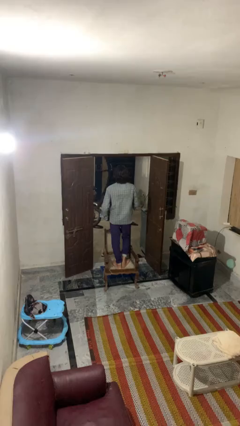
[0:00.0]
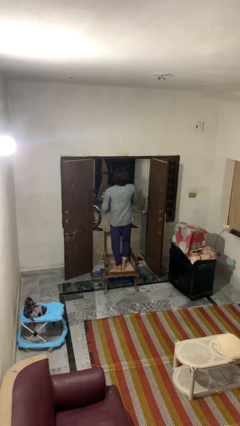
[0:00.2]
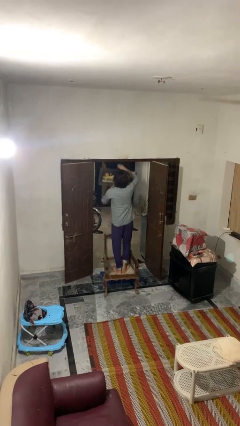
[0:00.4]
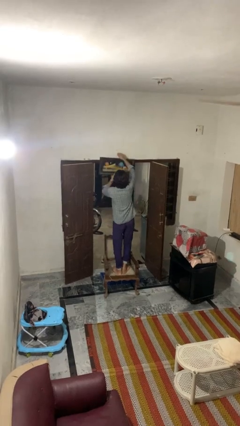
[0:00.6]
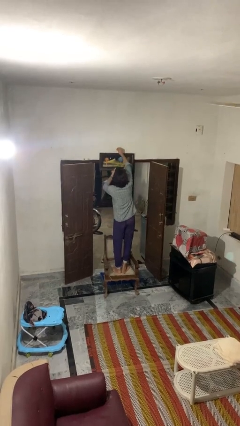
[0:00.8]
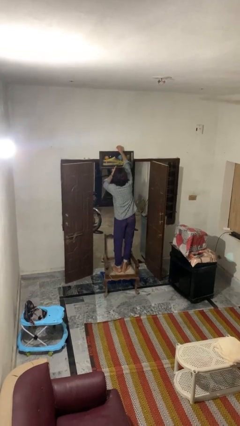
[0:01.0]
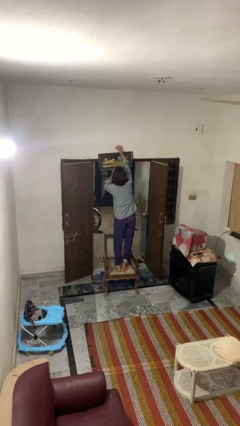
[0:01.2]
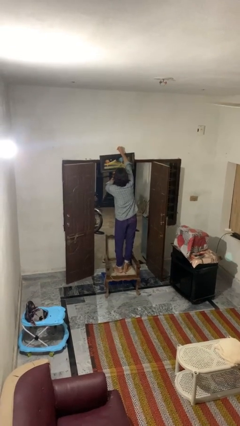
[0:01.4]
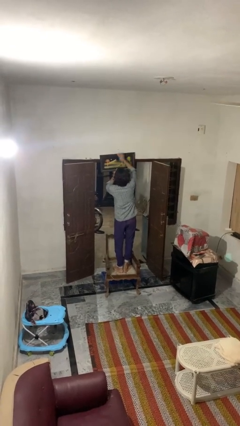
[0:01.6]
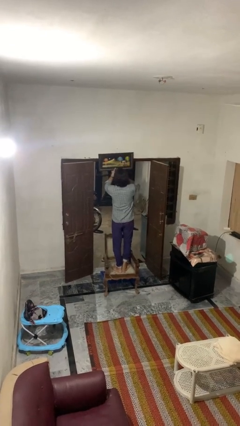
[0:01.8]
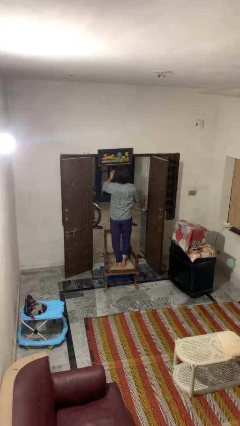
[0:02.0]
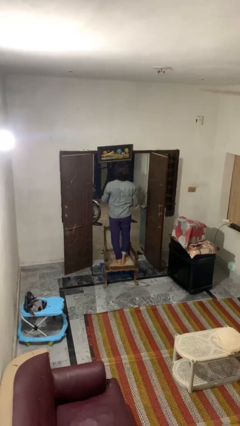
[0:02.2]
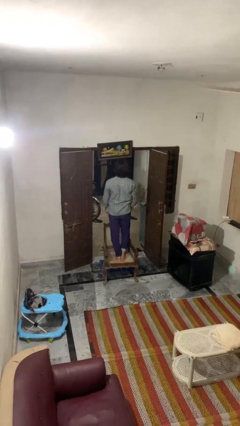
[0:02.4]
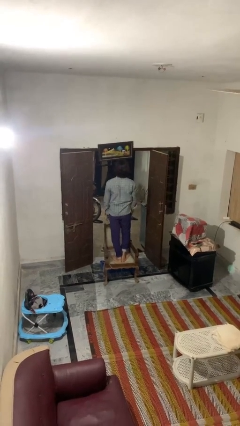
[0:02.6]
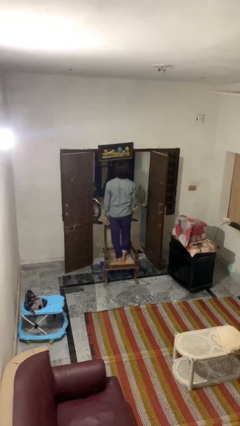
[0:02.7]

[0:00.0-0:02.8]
person puts up picture frame

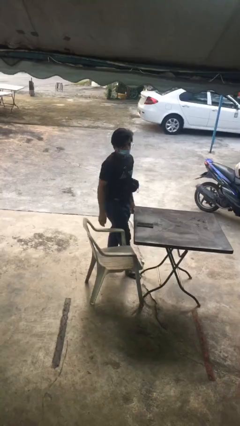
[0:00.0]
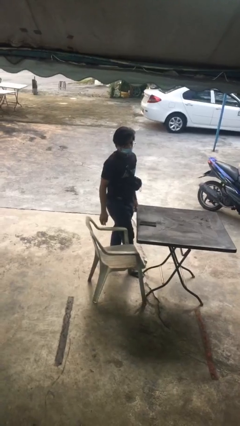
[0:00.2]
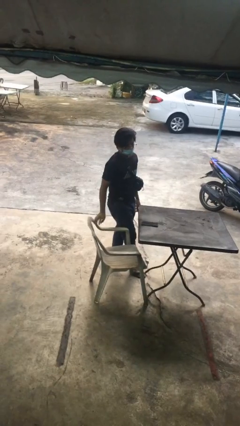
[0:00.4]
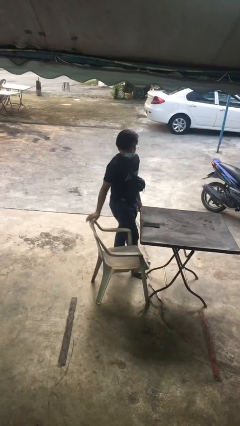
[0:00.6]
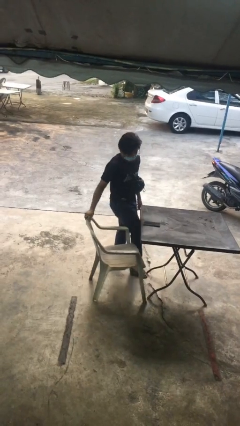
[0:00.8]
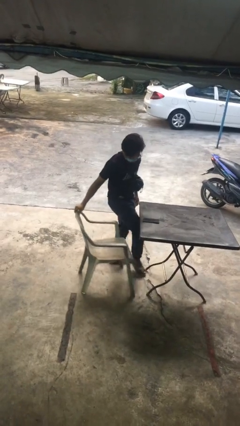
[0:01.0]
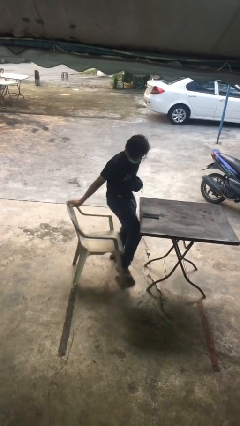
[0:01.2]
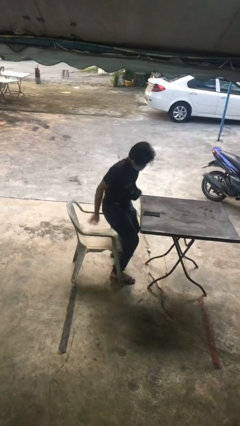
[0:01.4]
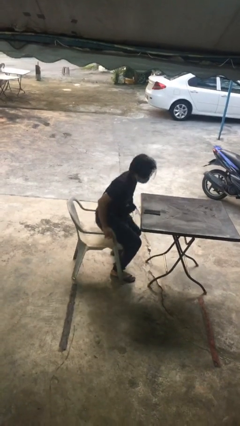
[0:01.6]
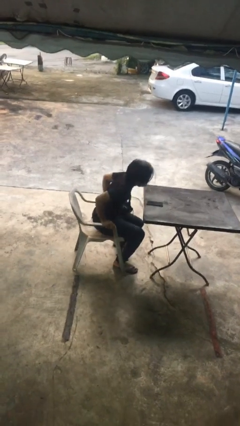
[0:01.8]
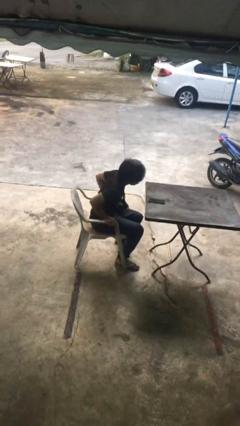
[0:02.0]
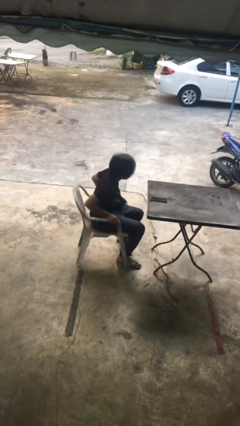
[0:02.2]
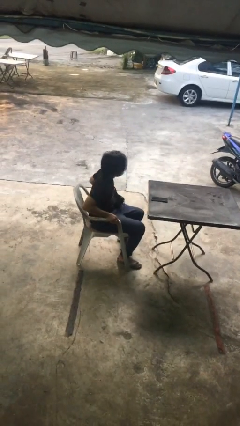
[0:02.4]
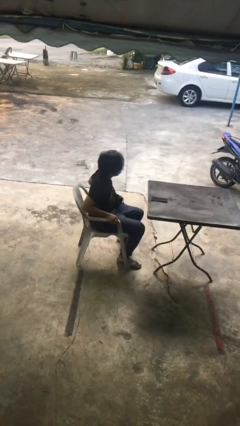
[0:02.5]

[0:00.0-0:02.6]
person sits down

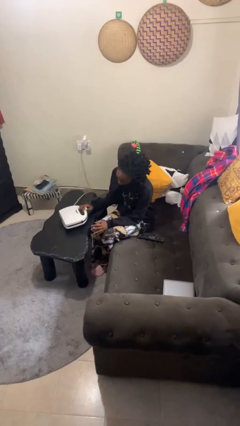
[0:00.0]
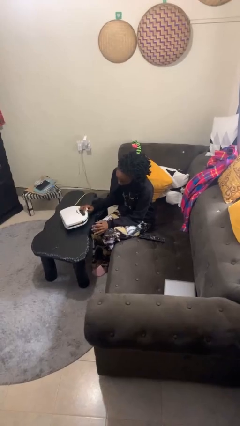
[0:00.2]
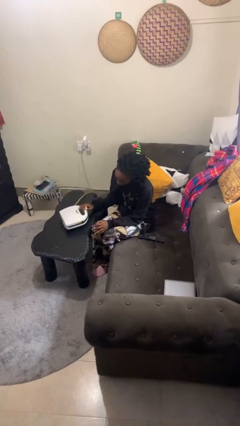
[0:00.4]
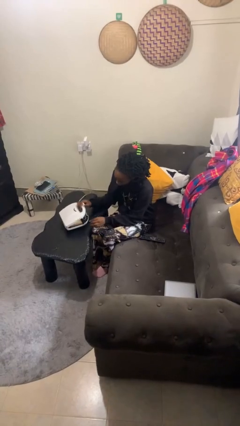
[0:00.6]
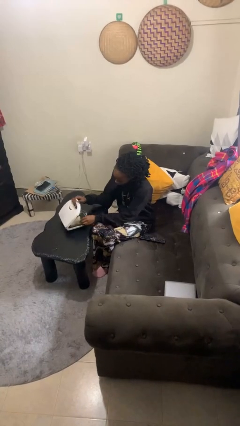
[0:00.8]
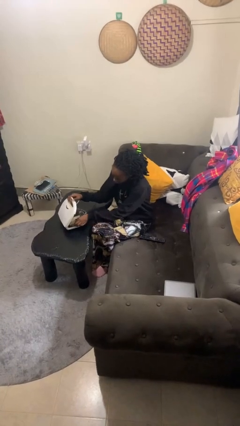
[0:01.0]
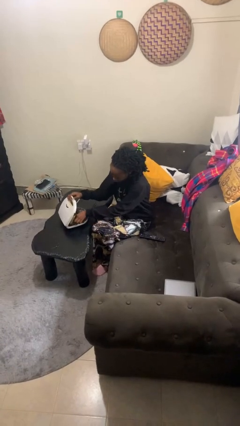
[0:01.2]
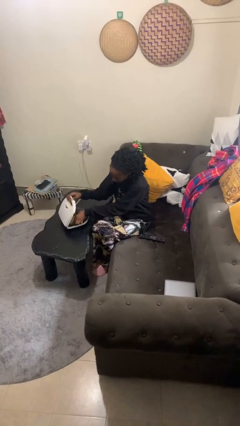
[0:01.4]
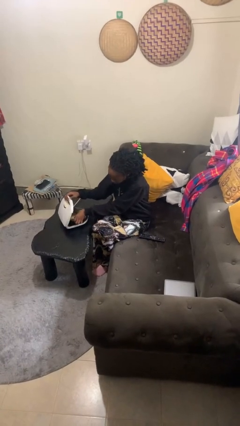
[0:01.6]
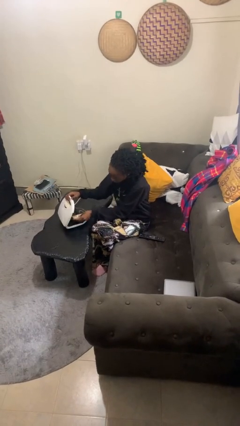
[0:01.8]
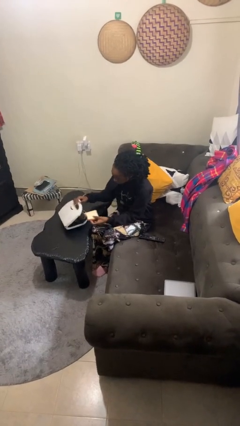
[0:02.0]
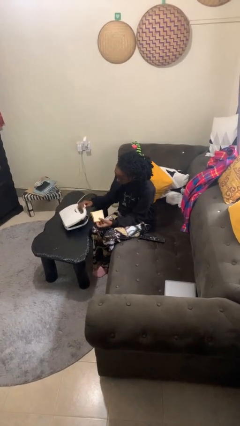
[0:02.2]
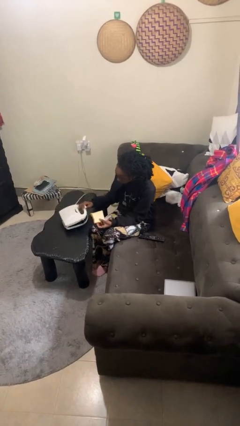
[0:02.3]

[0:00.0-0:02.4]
person takes object from toaster

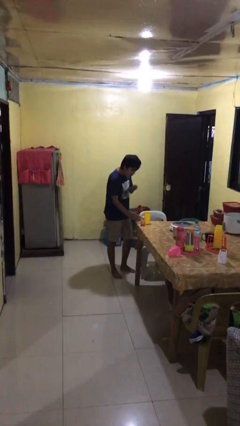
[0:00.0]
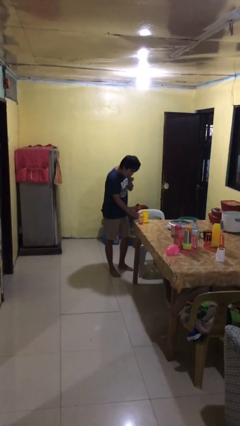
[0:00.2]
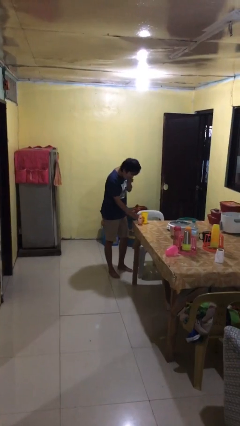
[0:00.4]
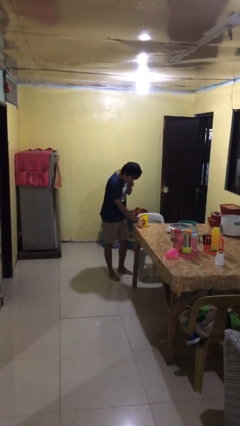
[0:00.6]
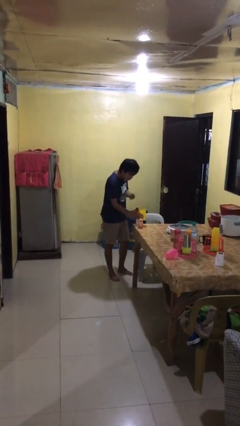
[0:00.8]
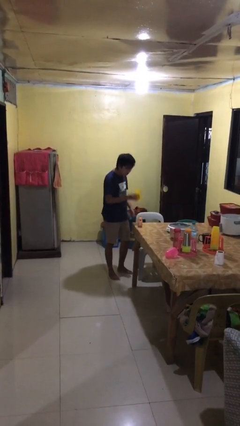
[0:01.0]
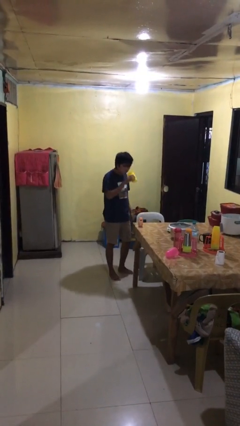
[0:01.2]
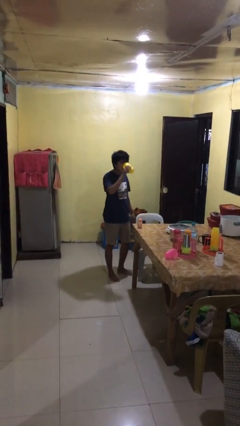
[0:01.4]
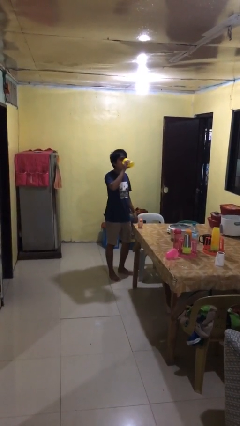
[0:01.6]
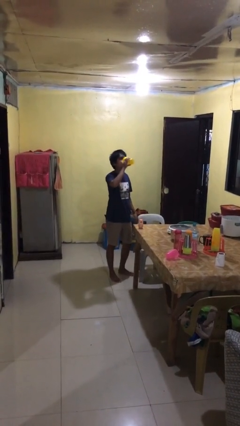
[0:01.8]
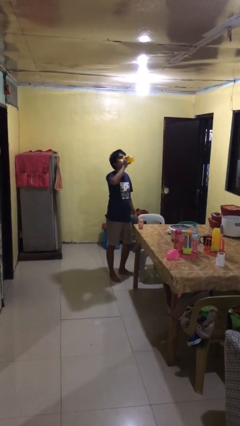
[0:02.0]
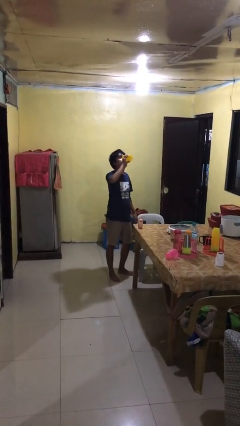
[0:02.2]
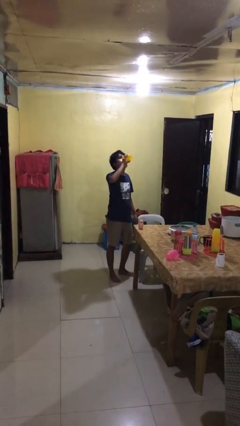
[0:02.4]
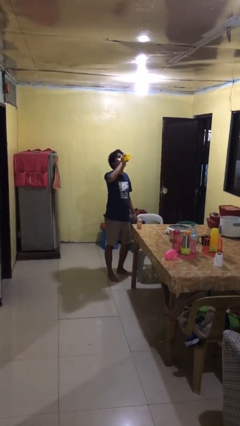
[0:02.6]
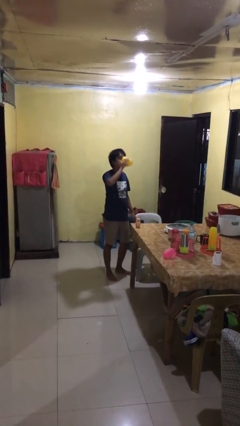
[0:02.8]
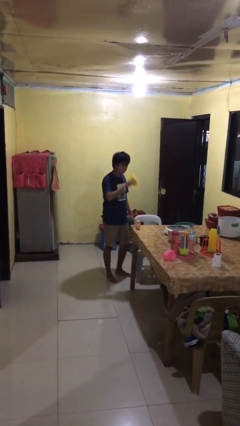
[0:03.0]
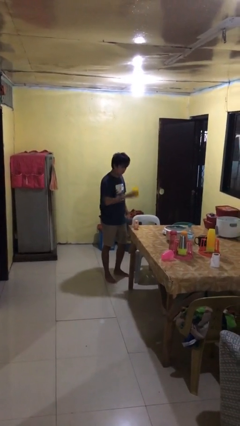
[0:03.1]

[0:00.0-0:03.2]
person drinks from cup

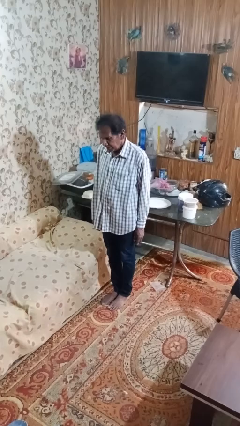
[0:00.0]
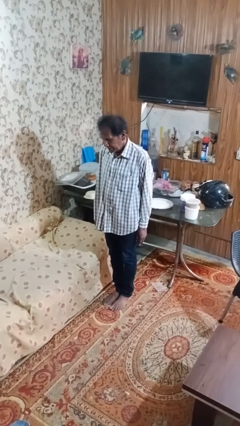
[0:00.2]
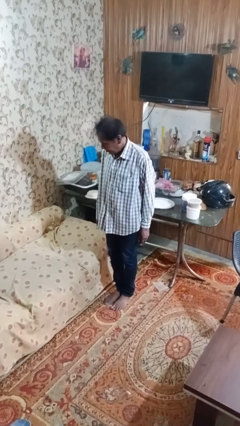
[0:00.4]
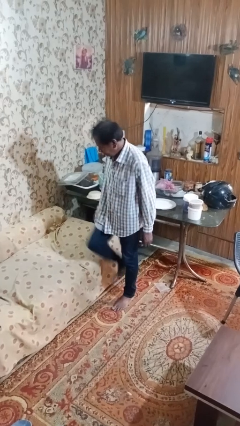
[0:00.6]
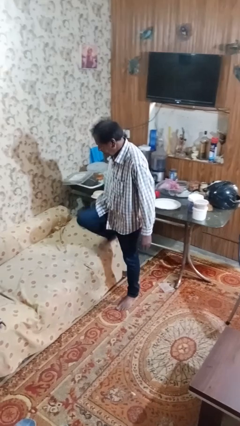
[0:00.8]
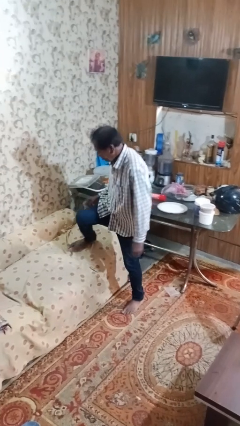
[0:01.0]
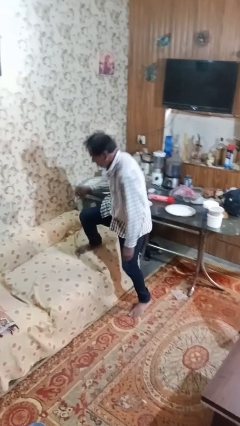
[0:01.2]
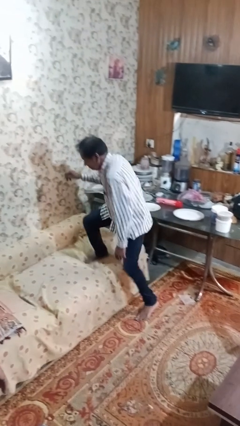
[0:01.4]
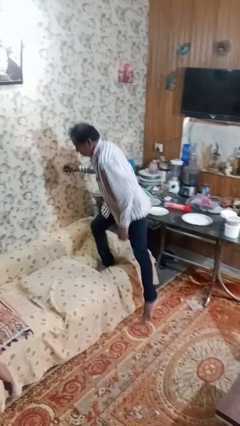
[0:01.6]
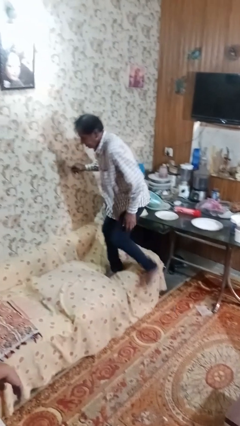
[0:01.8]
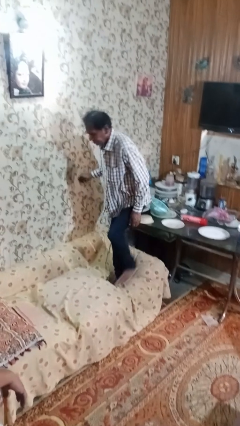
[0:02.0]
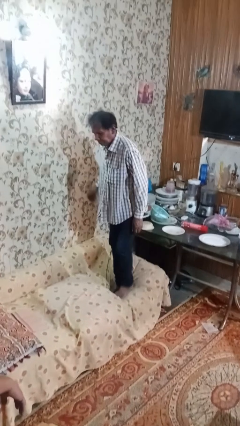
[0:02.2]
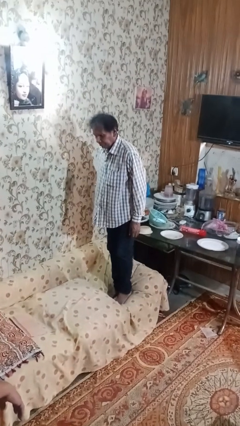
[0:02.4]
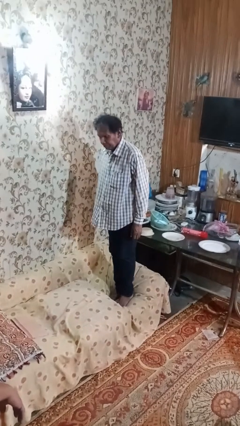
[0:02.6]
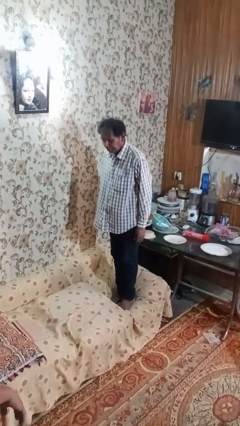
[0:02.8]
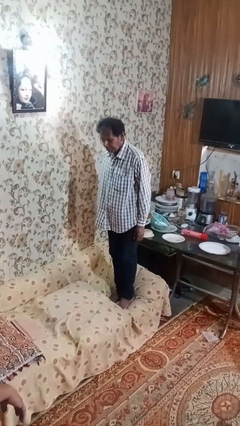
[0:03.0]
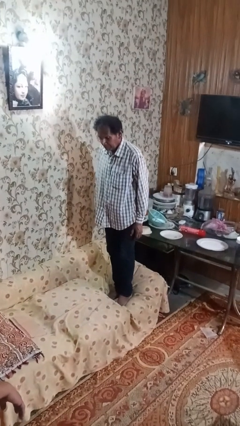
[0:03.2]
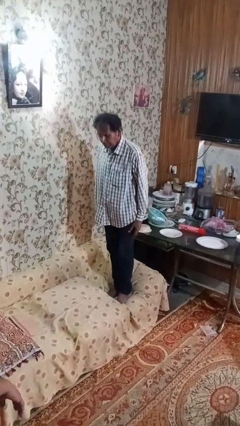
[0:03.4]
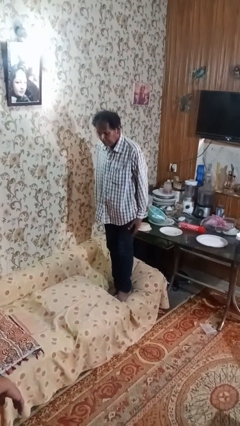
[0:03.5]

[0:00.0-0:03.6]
person climbs on couch

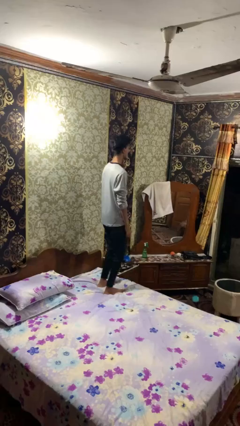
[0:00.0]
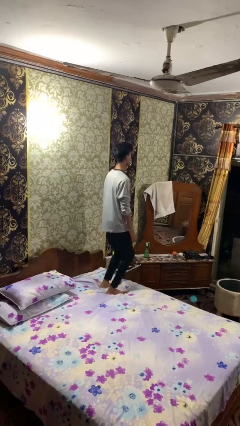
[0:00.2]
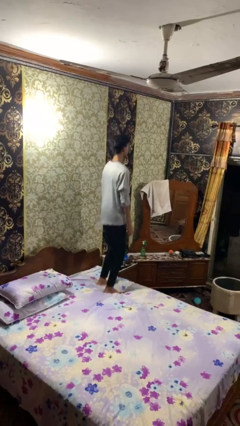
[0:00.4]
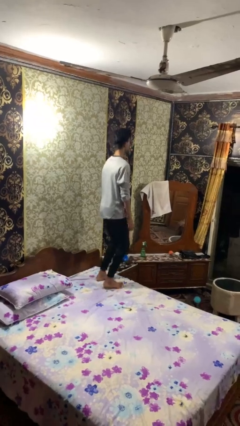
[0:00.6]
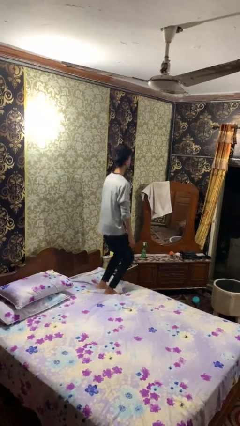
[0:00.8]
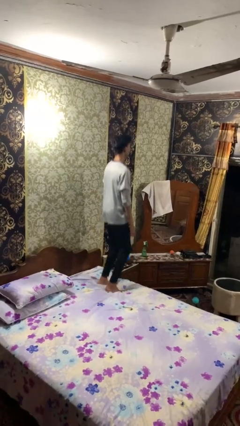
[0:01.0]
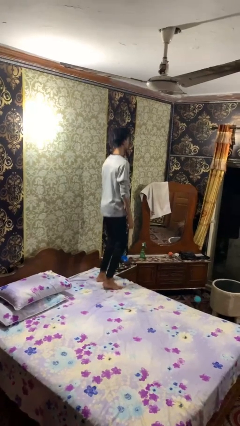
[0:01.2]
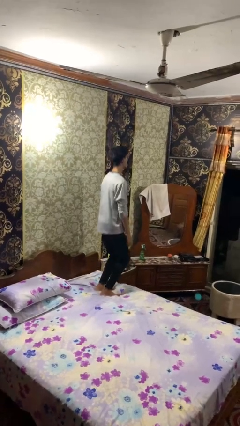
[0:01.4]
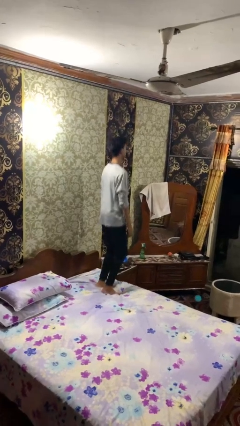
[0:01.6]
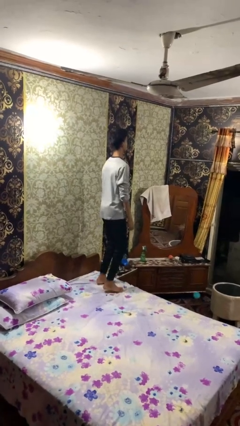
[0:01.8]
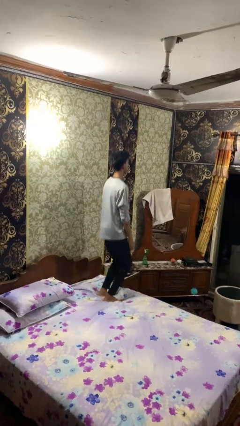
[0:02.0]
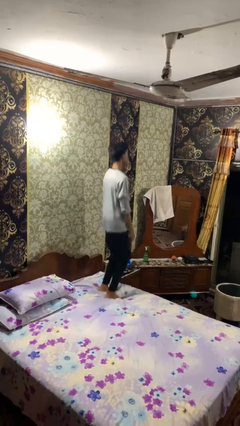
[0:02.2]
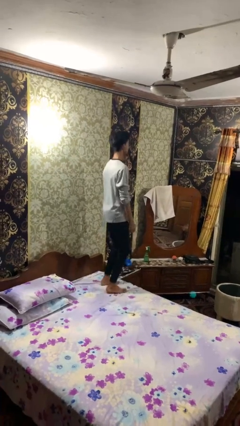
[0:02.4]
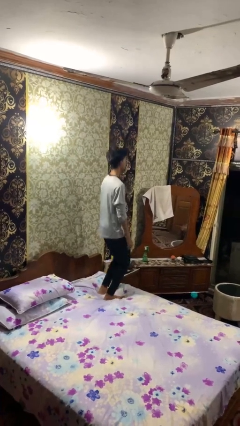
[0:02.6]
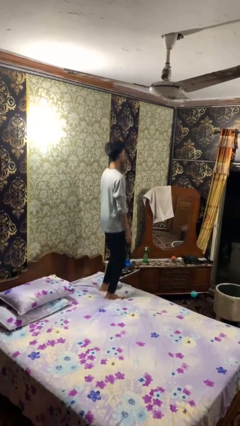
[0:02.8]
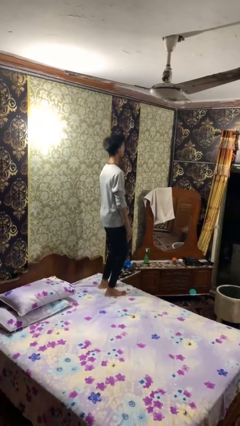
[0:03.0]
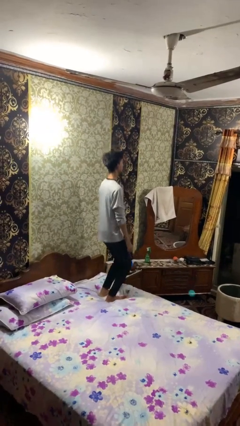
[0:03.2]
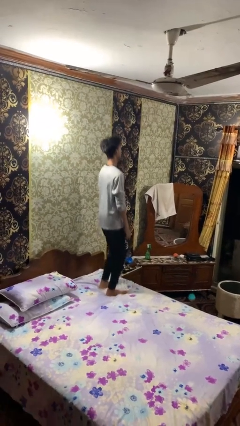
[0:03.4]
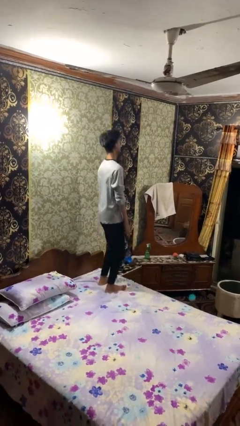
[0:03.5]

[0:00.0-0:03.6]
person jumps on bed
